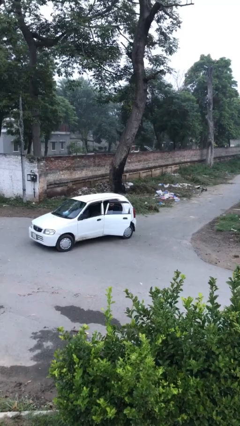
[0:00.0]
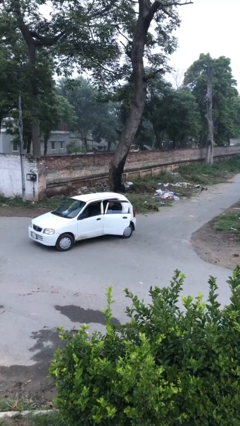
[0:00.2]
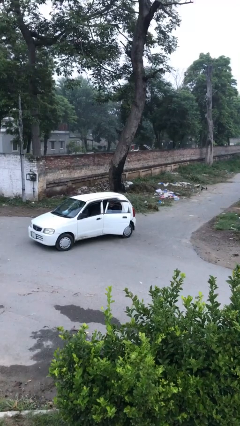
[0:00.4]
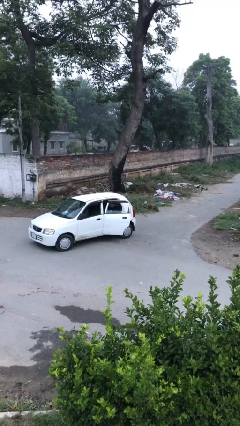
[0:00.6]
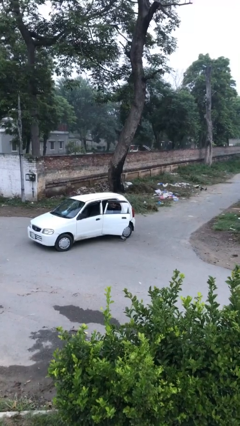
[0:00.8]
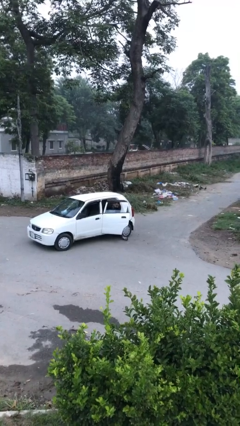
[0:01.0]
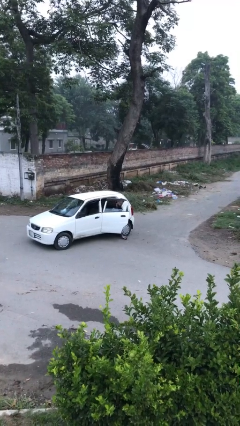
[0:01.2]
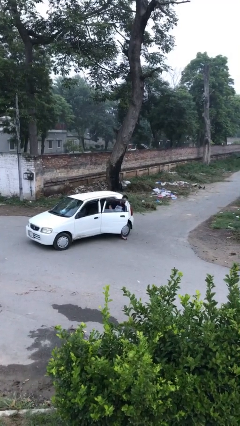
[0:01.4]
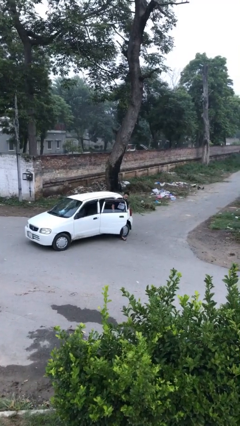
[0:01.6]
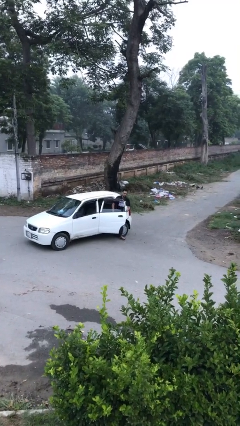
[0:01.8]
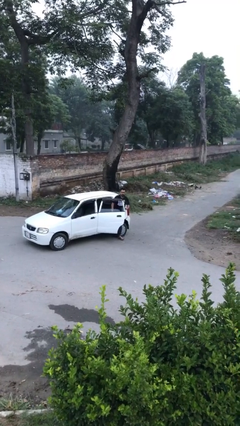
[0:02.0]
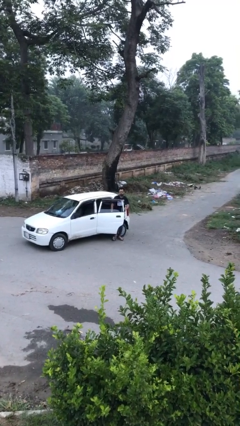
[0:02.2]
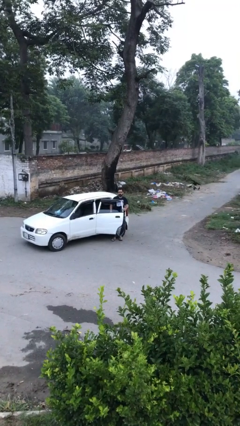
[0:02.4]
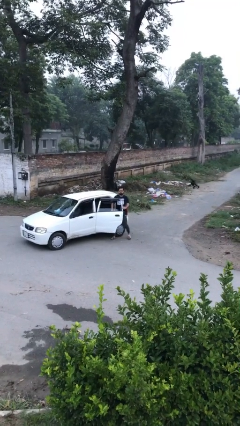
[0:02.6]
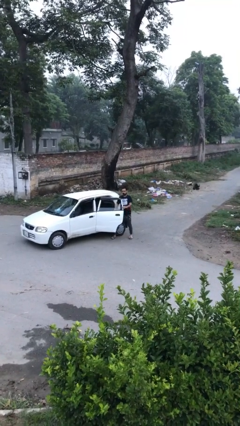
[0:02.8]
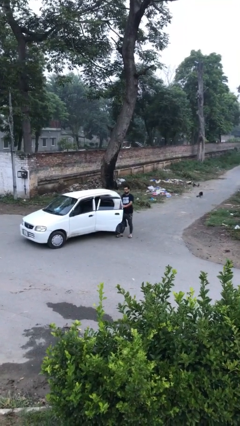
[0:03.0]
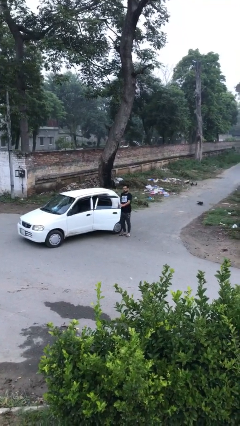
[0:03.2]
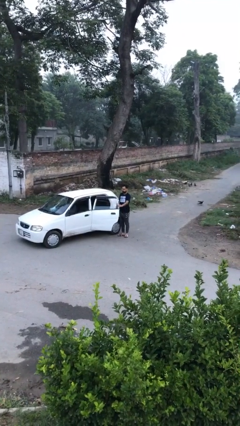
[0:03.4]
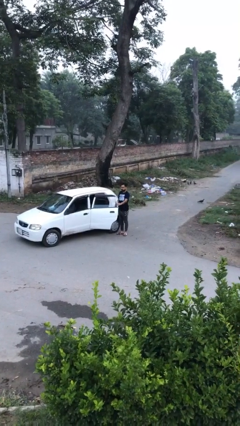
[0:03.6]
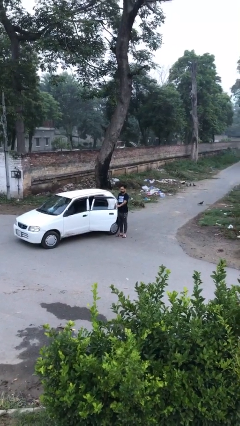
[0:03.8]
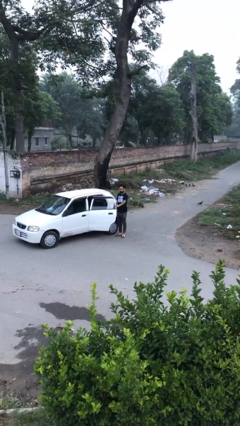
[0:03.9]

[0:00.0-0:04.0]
person exits car

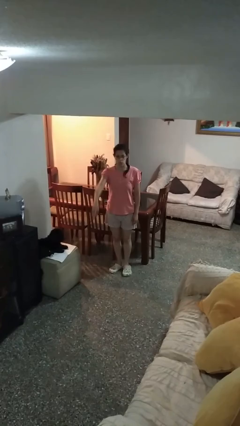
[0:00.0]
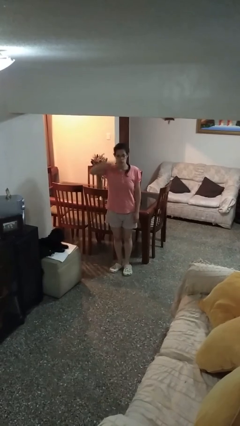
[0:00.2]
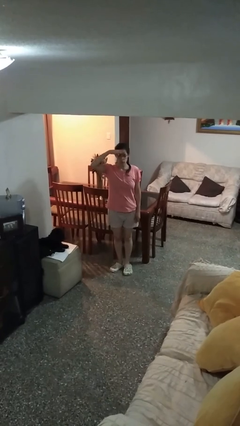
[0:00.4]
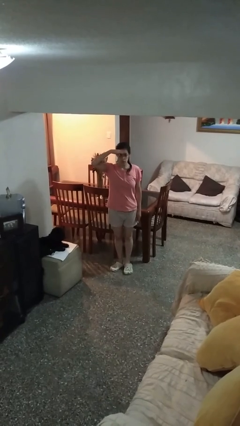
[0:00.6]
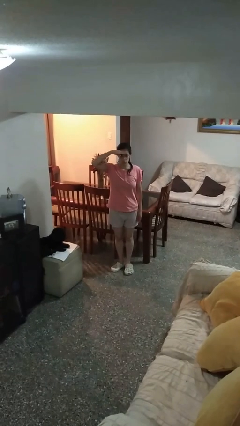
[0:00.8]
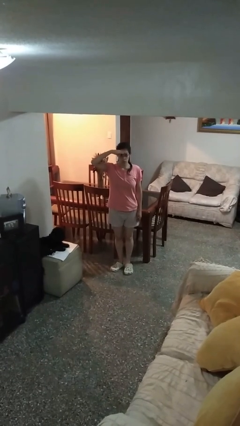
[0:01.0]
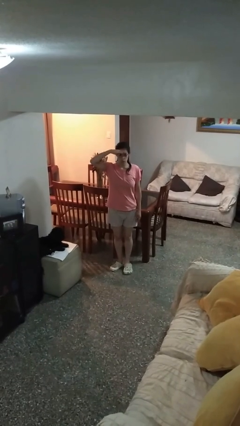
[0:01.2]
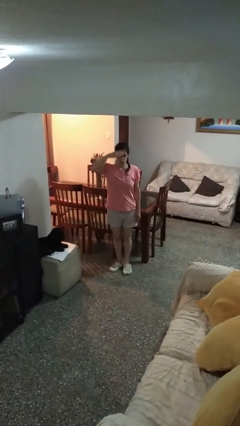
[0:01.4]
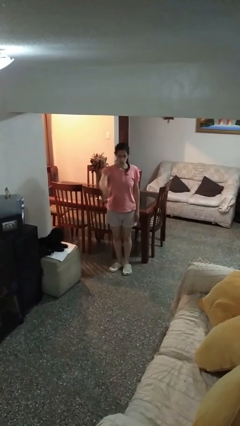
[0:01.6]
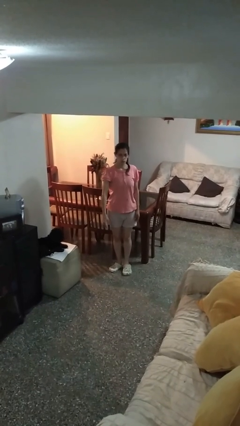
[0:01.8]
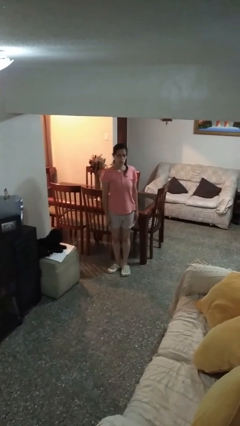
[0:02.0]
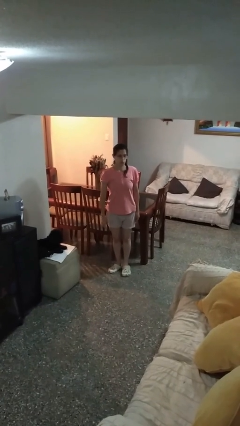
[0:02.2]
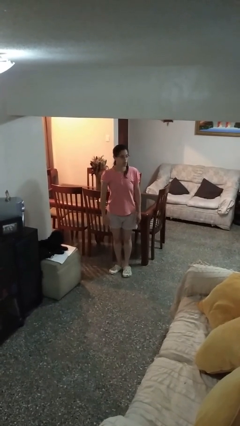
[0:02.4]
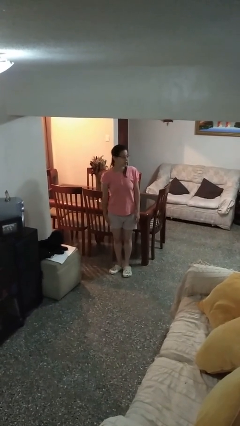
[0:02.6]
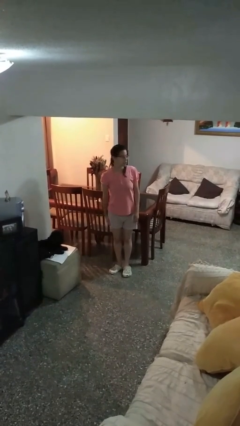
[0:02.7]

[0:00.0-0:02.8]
person salutes

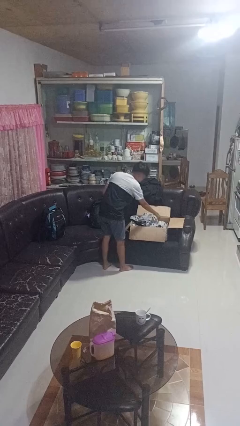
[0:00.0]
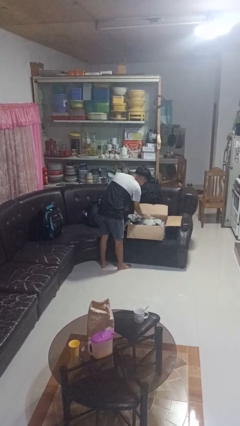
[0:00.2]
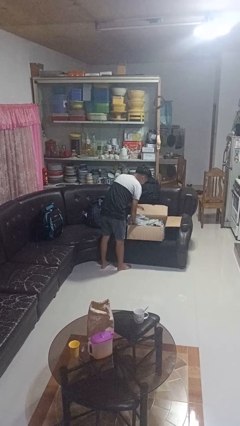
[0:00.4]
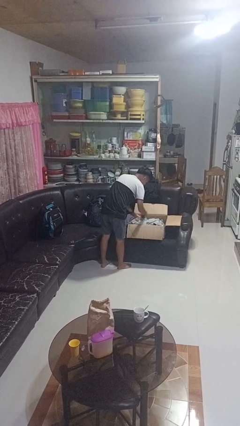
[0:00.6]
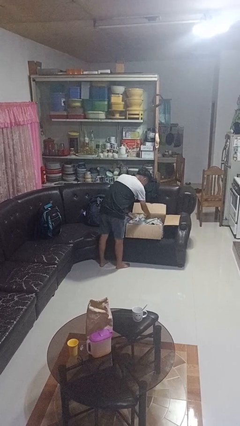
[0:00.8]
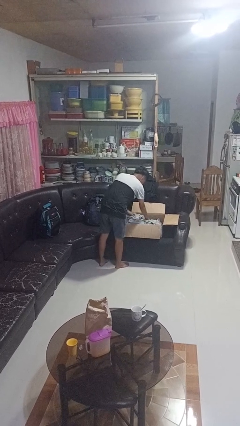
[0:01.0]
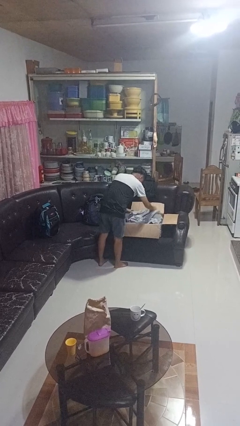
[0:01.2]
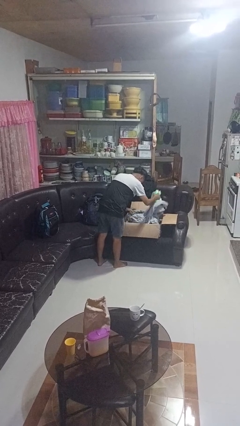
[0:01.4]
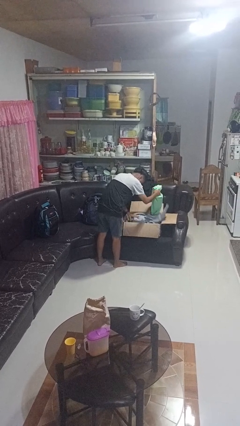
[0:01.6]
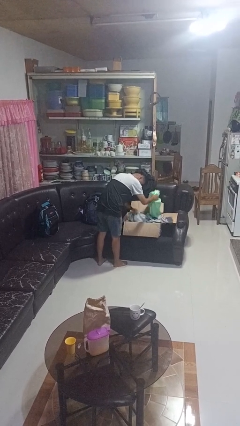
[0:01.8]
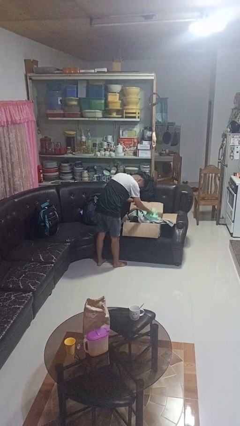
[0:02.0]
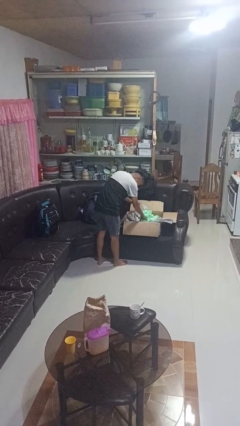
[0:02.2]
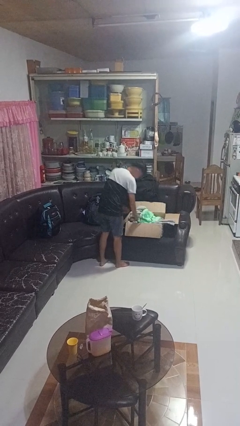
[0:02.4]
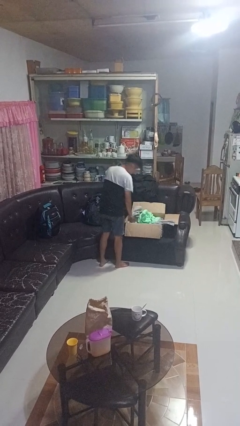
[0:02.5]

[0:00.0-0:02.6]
person searches in box

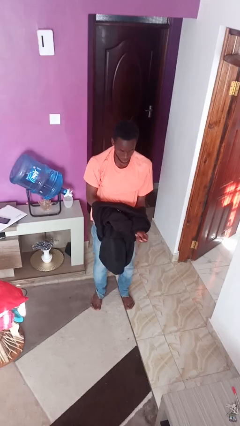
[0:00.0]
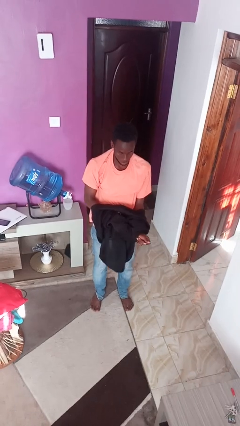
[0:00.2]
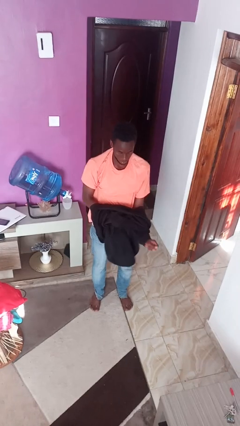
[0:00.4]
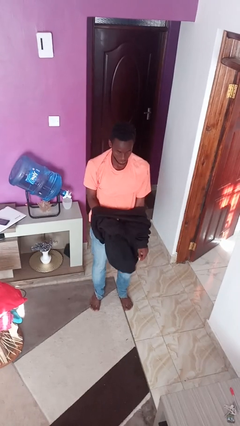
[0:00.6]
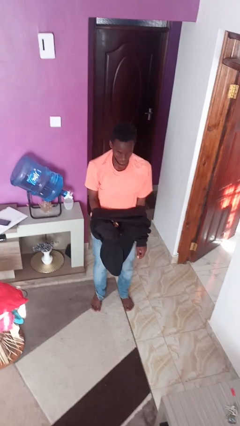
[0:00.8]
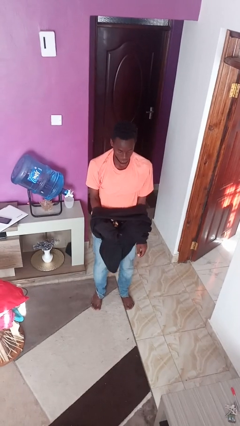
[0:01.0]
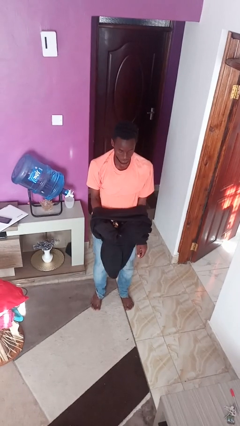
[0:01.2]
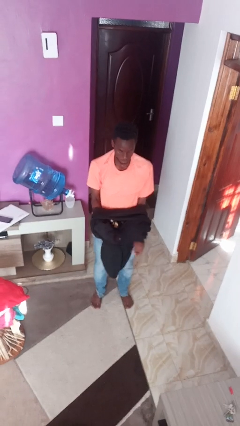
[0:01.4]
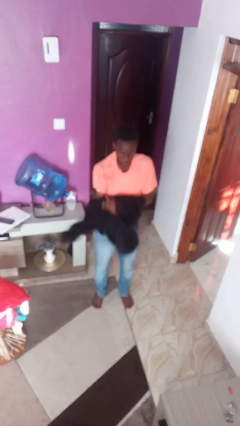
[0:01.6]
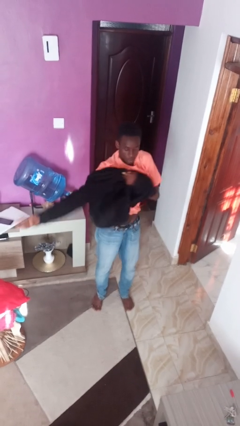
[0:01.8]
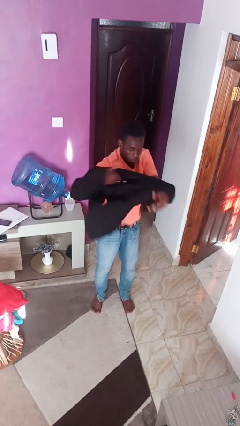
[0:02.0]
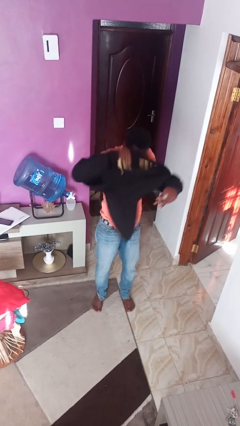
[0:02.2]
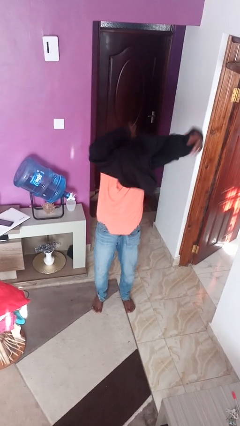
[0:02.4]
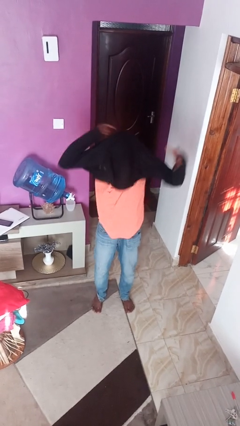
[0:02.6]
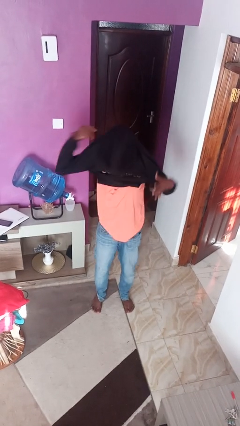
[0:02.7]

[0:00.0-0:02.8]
person shoves person

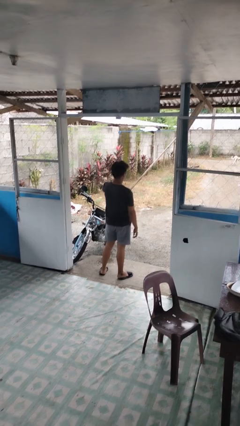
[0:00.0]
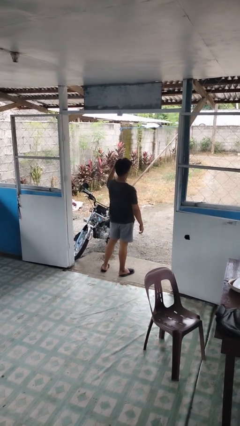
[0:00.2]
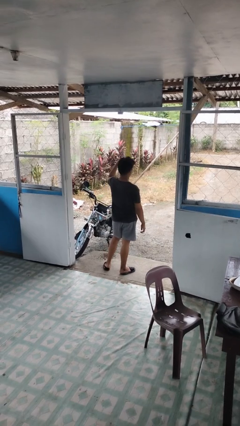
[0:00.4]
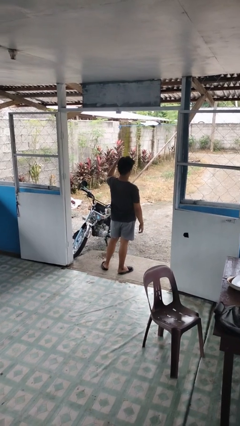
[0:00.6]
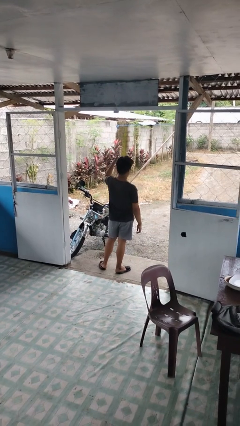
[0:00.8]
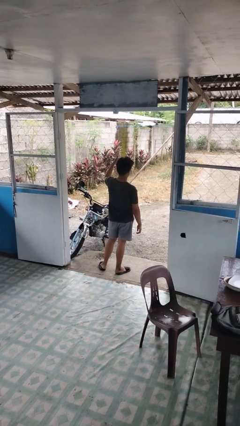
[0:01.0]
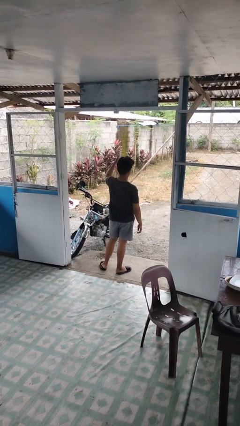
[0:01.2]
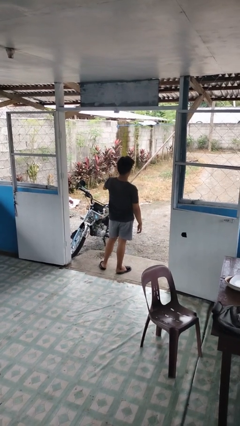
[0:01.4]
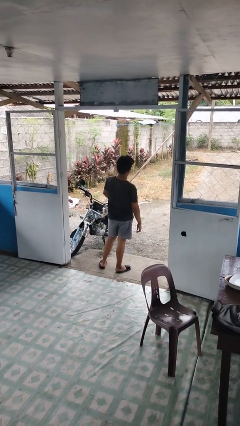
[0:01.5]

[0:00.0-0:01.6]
person gestures thumbs up

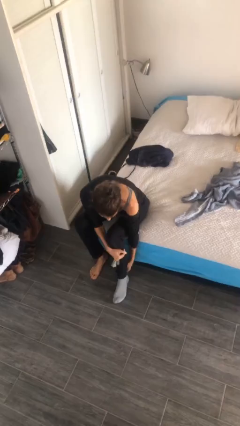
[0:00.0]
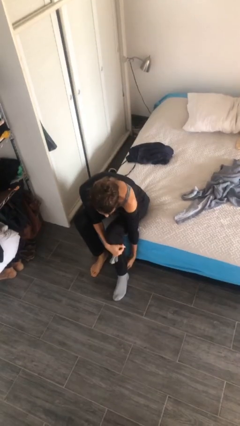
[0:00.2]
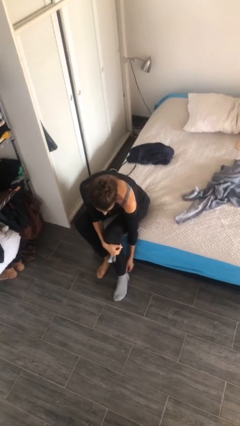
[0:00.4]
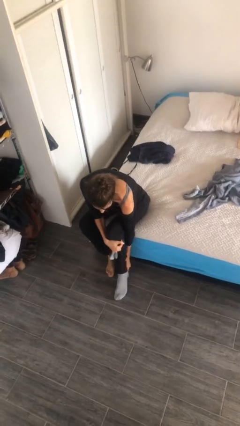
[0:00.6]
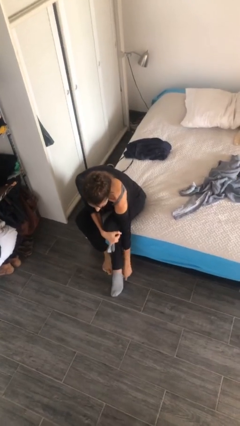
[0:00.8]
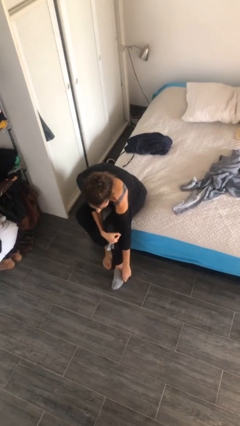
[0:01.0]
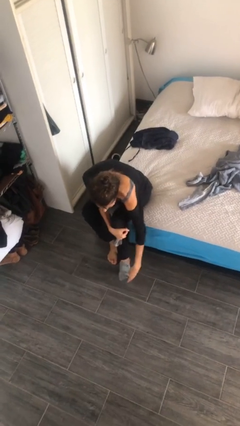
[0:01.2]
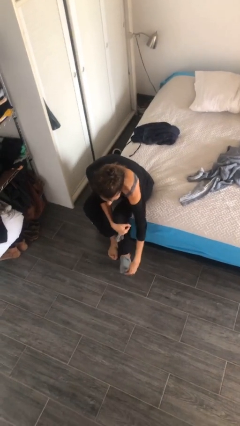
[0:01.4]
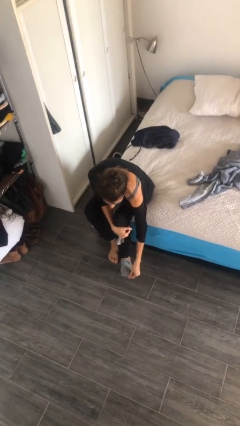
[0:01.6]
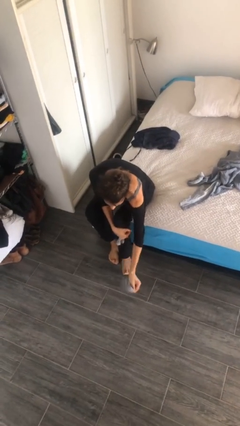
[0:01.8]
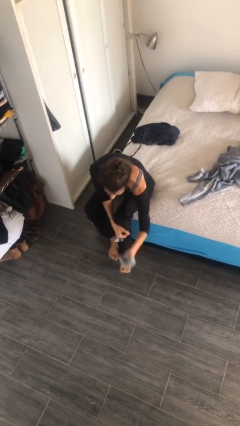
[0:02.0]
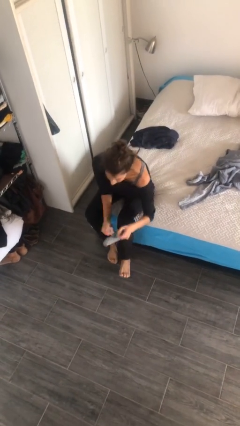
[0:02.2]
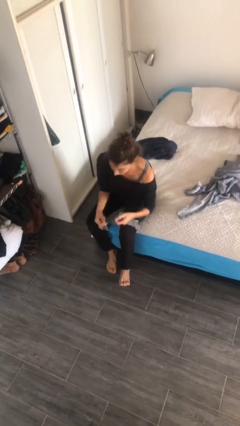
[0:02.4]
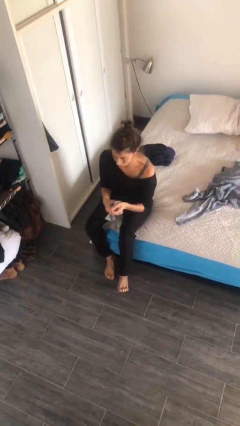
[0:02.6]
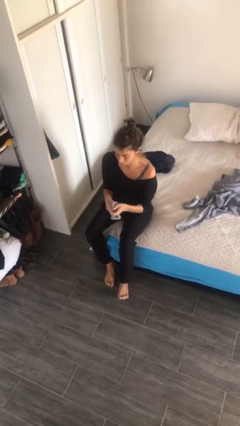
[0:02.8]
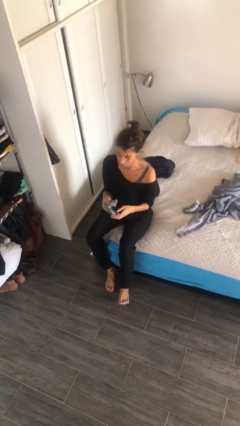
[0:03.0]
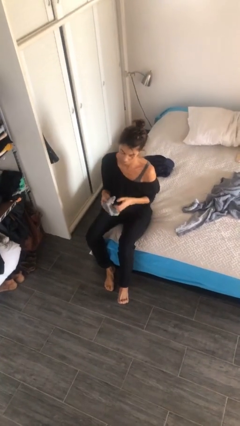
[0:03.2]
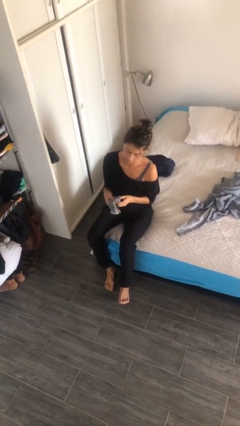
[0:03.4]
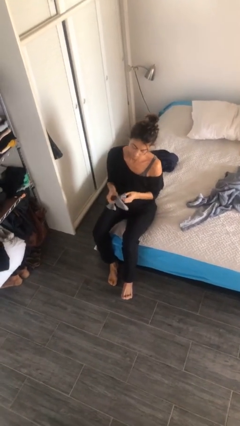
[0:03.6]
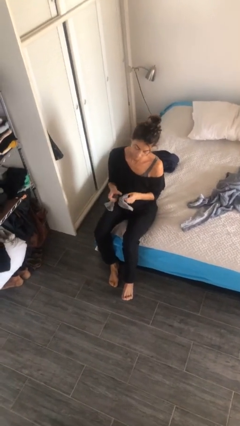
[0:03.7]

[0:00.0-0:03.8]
person takes off socks

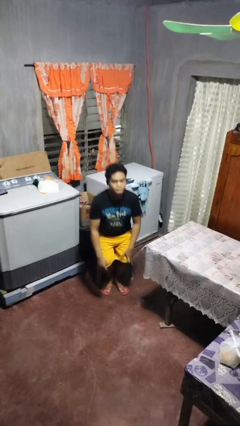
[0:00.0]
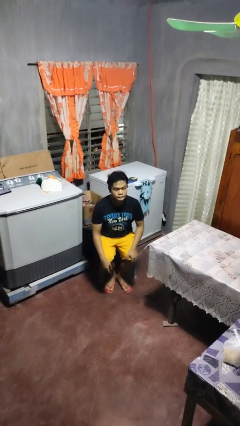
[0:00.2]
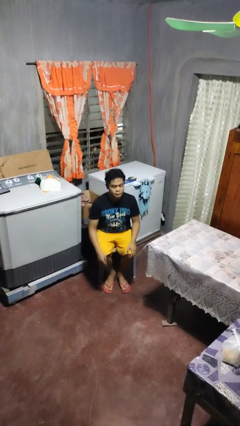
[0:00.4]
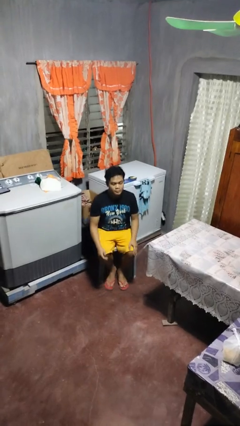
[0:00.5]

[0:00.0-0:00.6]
person sits down
